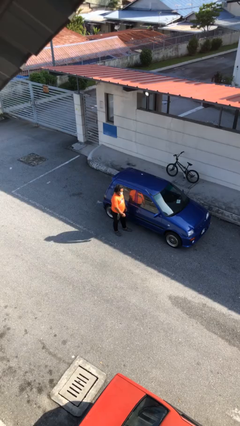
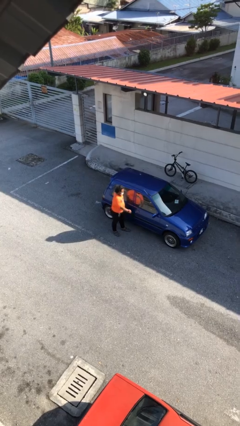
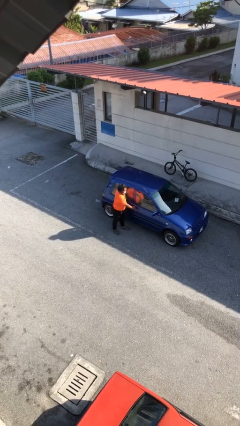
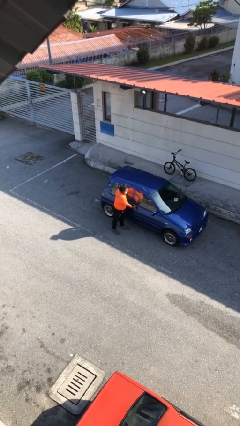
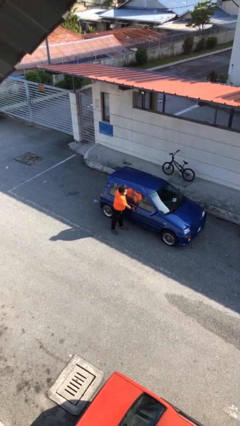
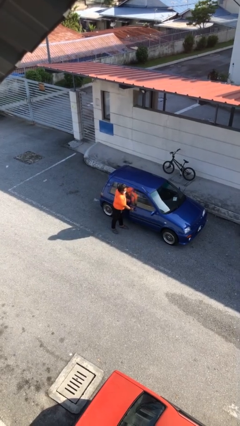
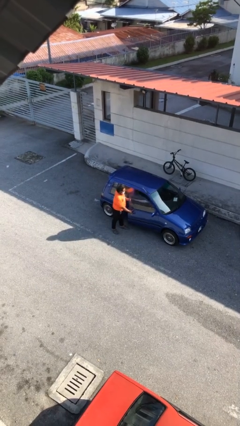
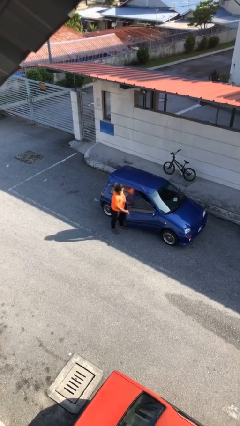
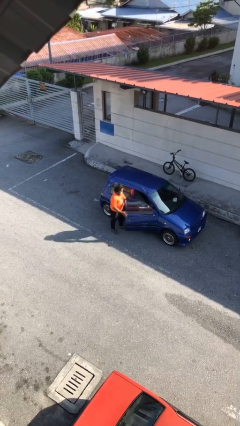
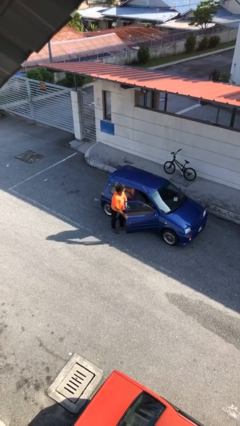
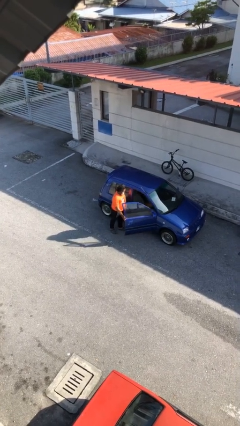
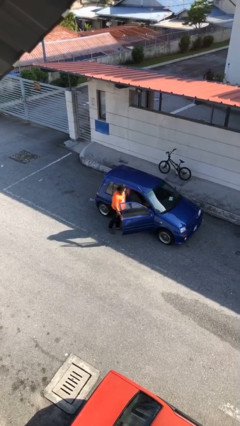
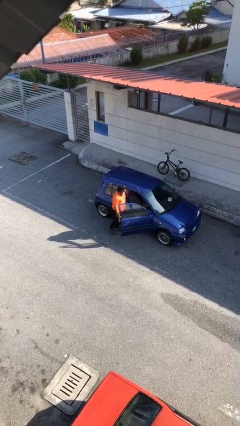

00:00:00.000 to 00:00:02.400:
person opens car door

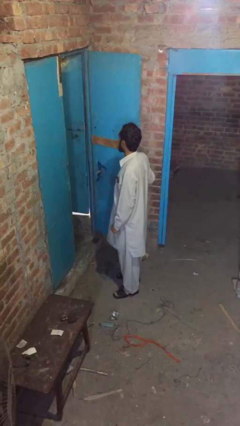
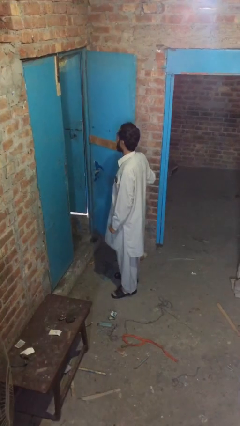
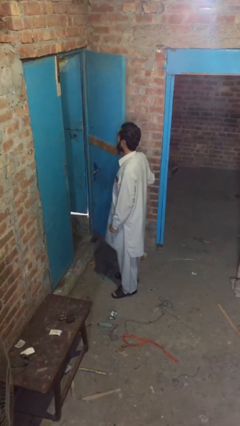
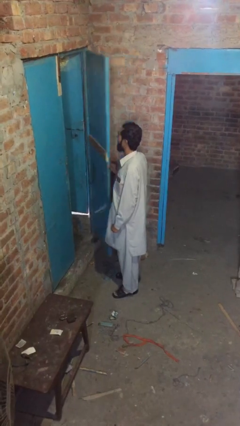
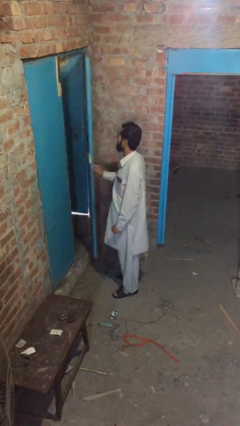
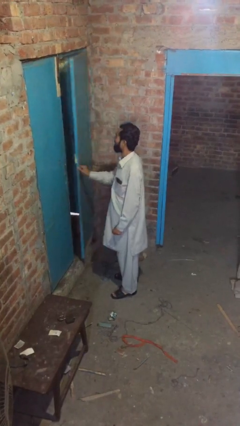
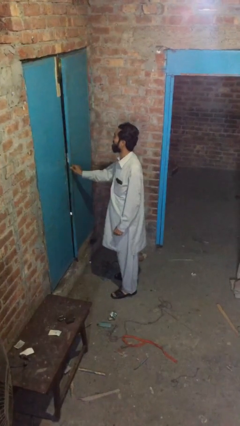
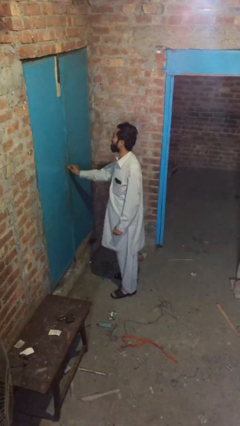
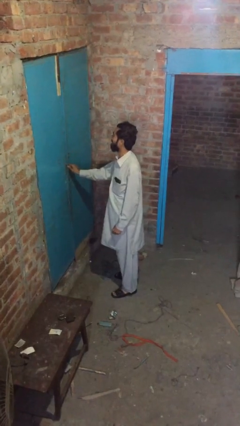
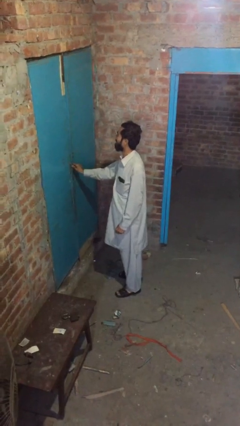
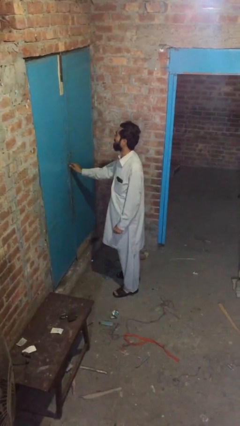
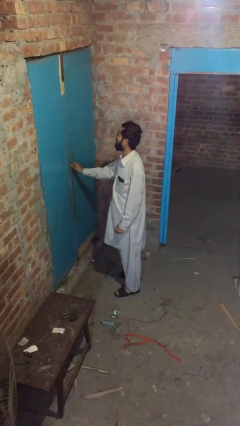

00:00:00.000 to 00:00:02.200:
person closes facility door

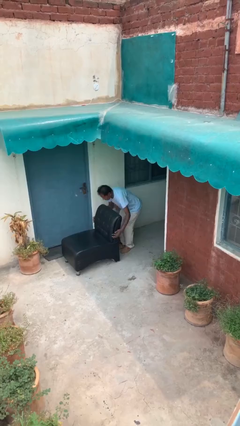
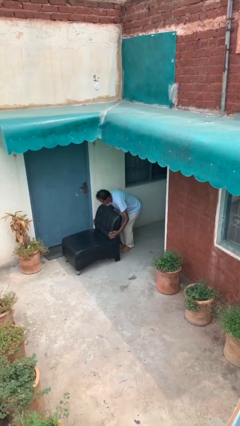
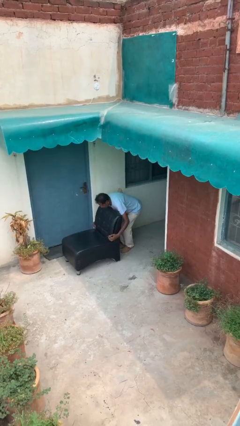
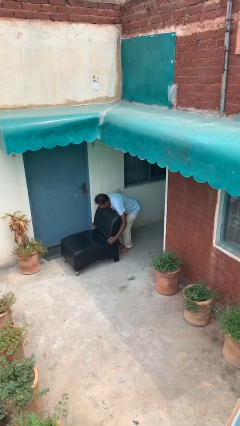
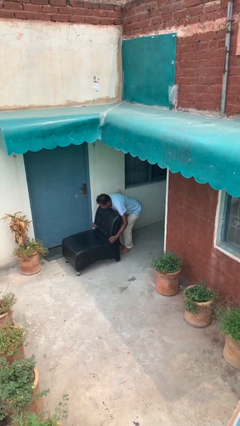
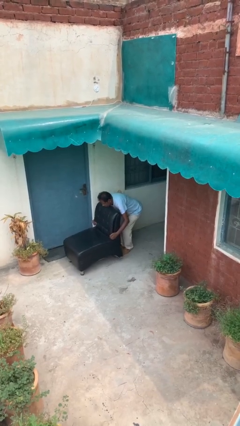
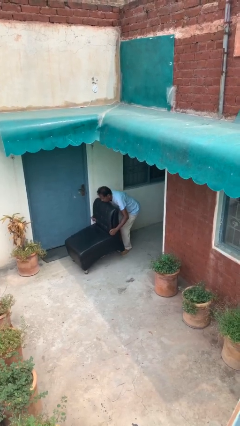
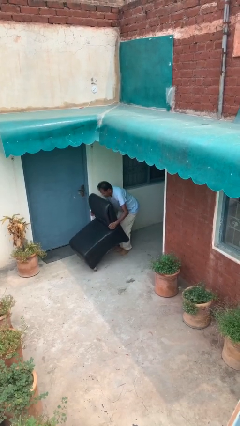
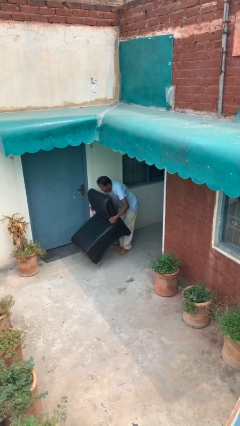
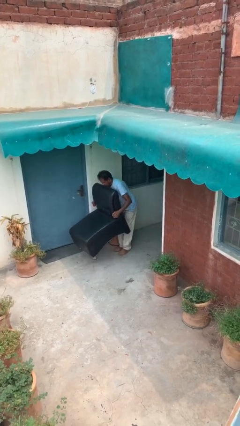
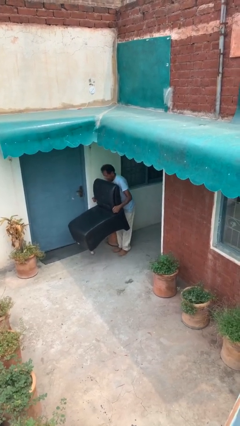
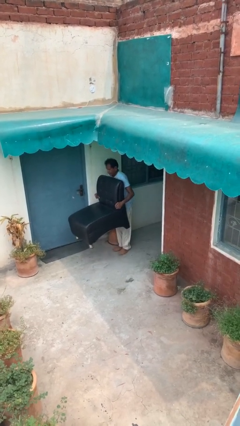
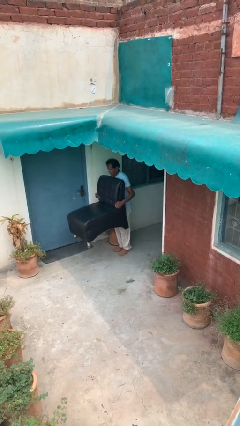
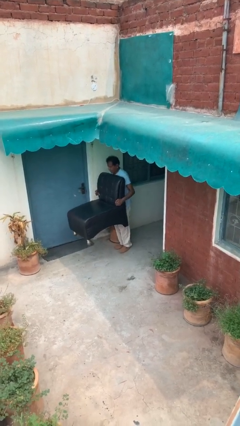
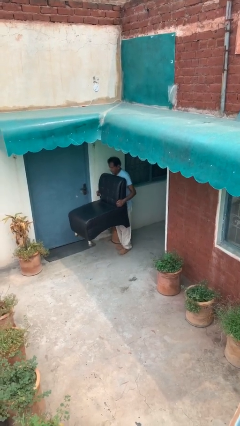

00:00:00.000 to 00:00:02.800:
person picks up object from floor

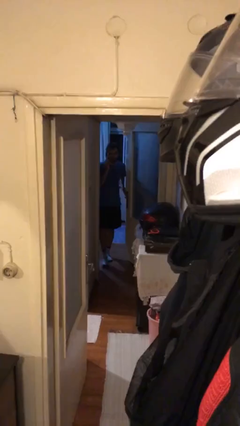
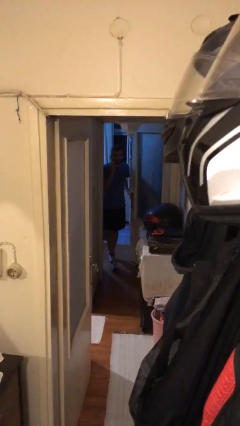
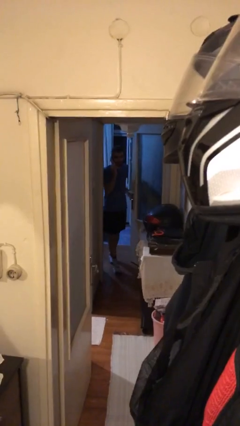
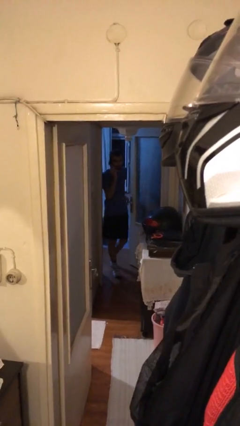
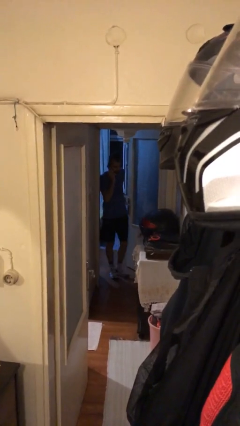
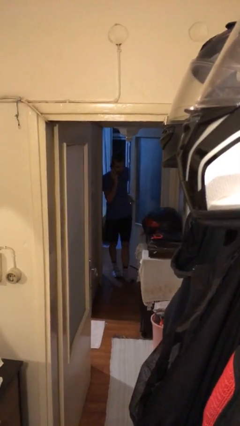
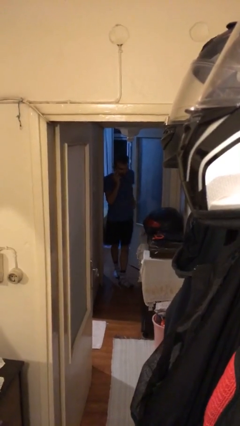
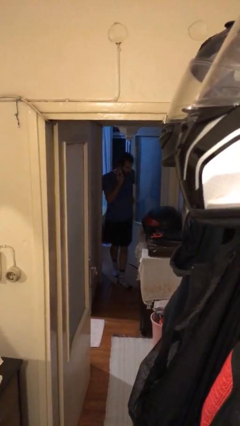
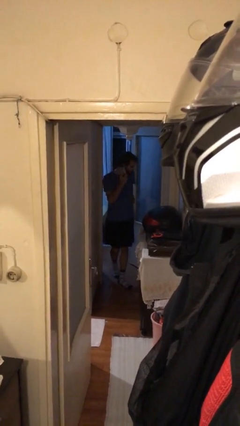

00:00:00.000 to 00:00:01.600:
person enters scene through structure

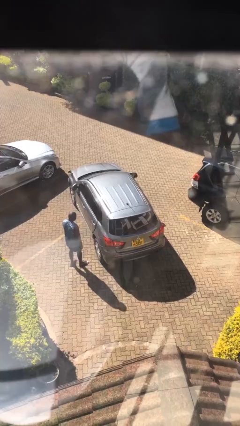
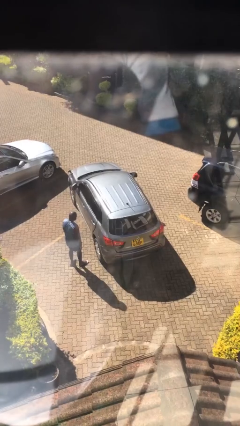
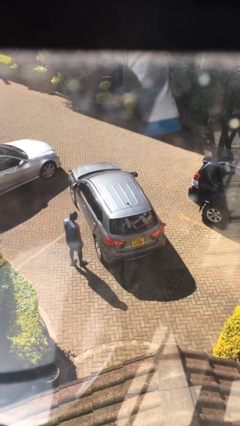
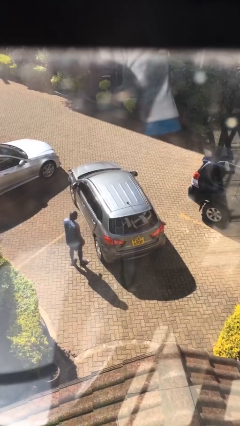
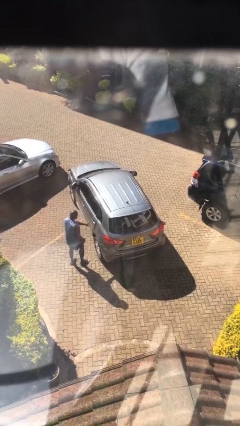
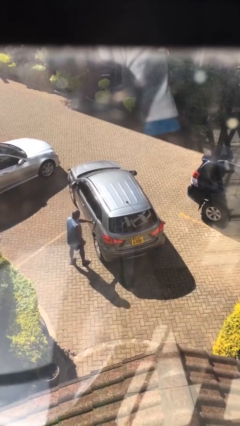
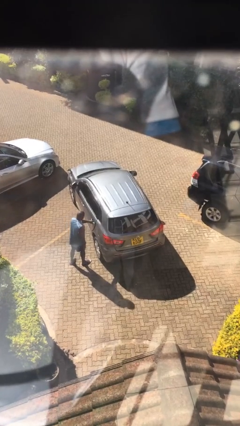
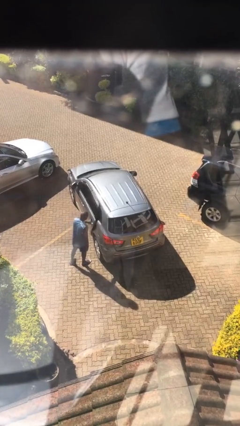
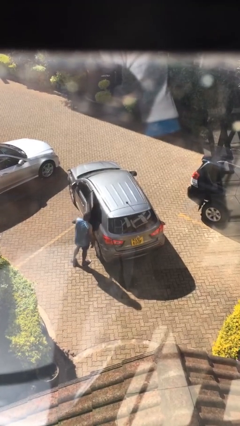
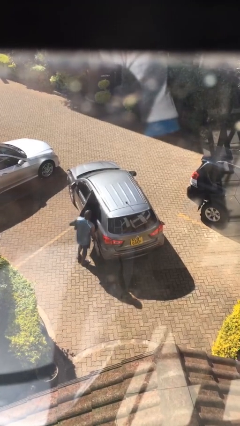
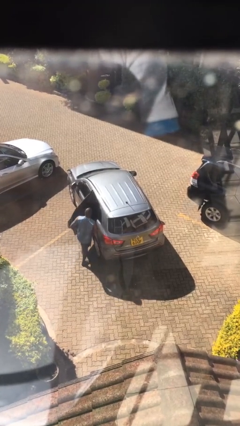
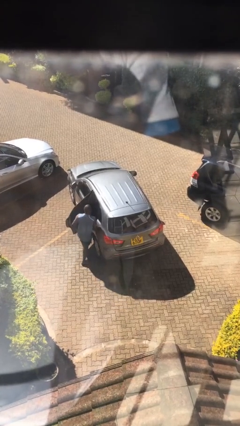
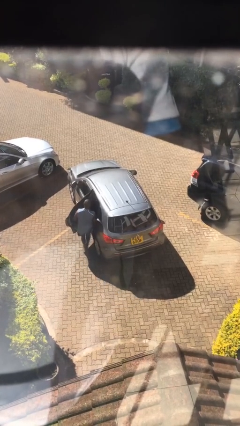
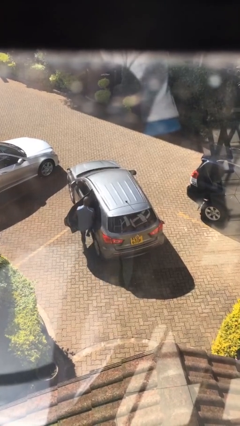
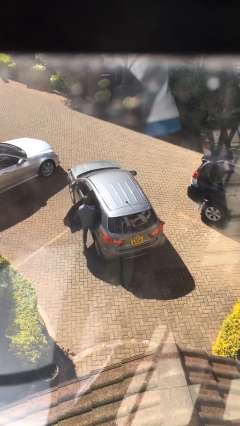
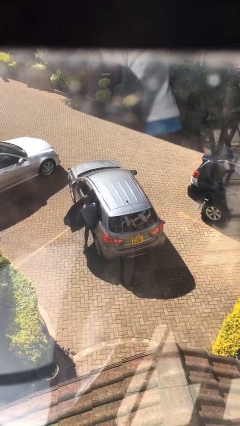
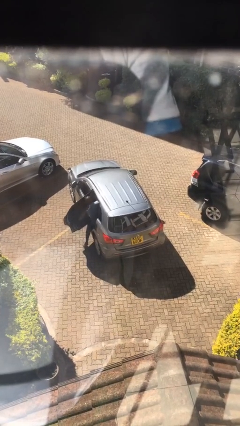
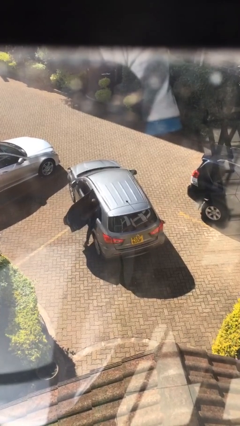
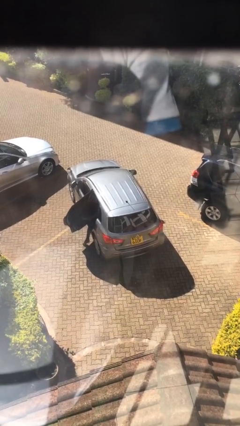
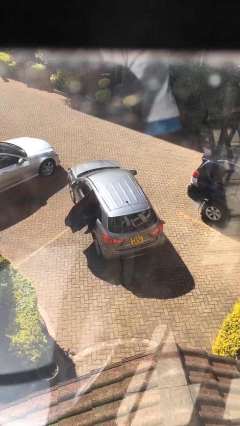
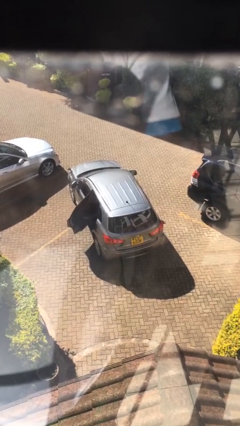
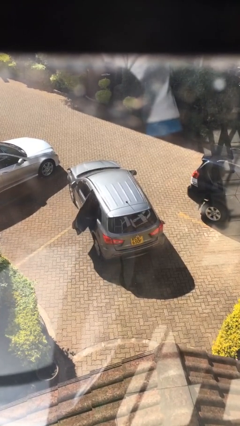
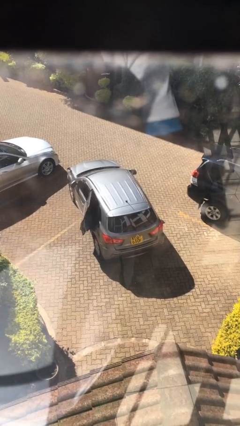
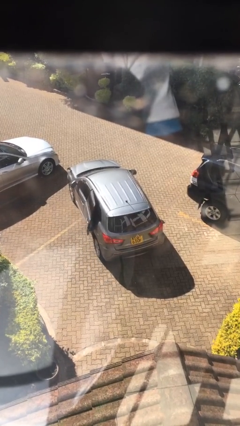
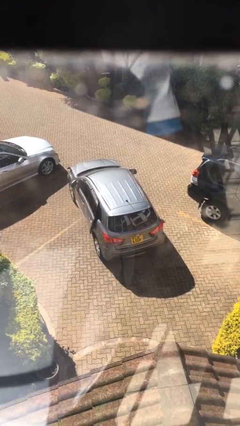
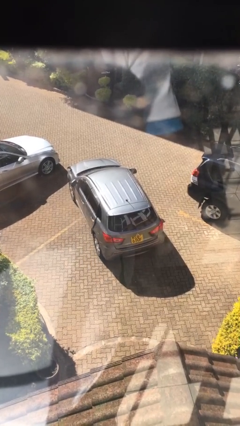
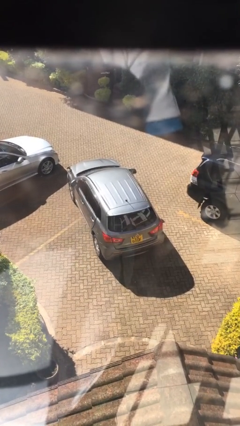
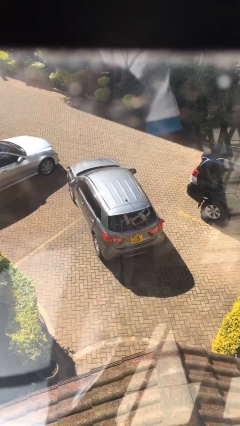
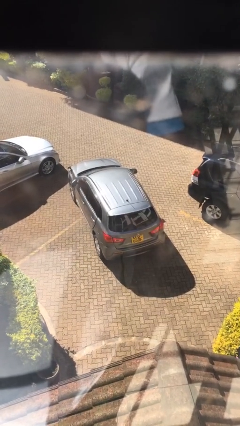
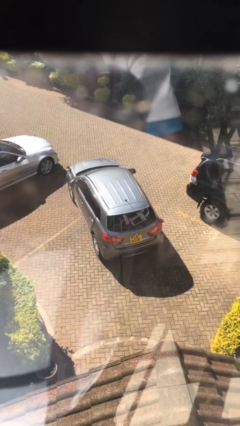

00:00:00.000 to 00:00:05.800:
car picks up person

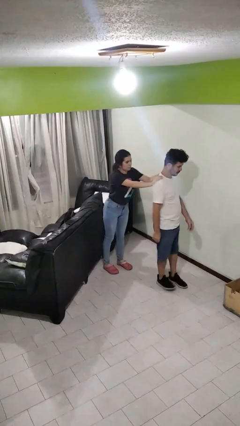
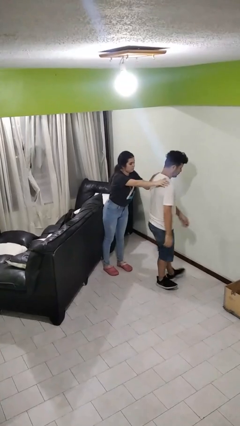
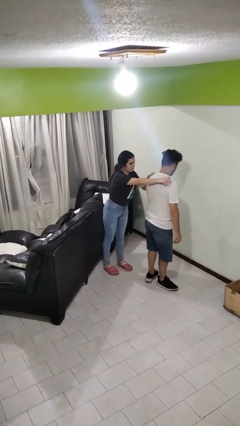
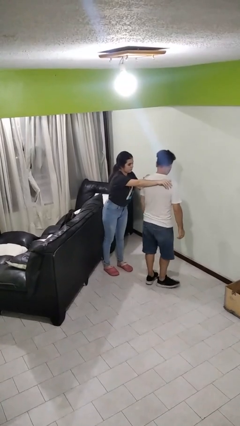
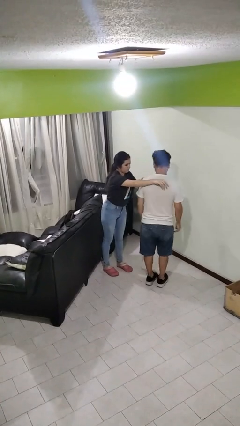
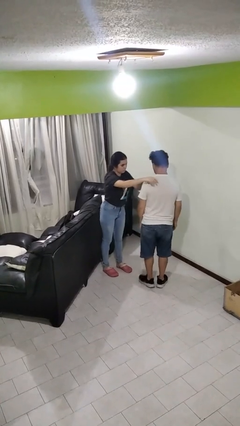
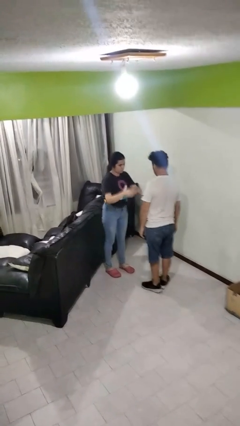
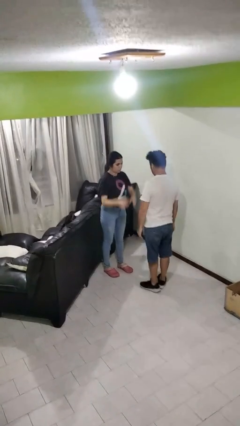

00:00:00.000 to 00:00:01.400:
person spins person around

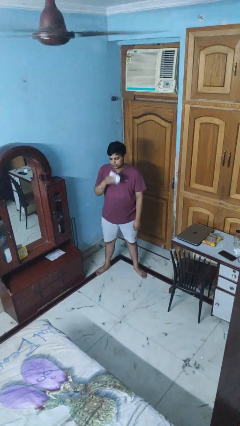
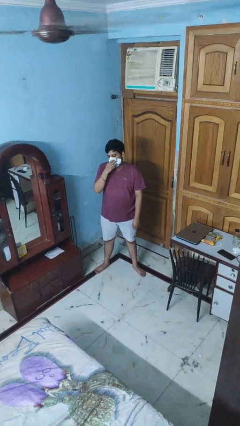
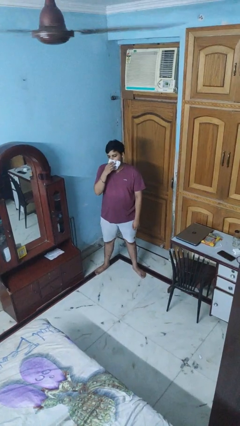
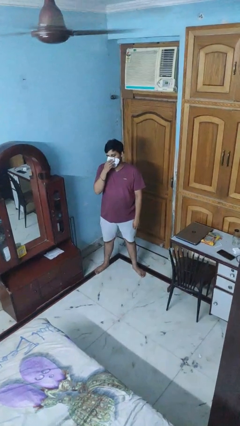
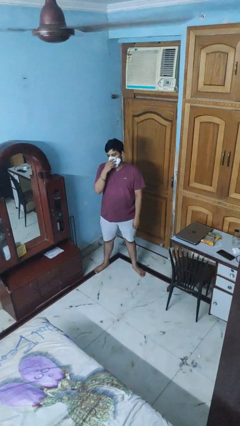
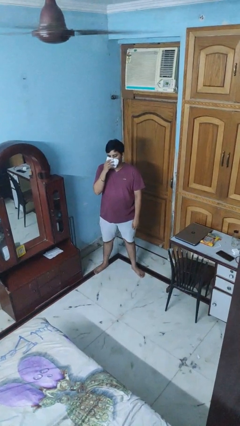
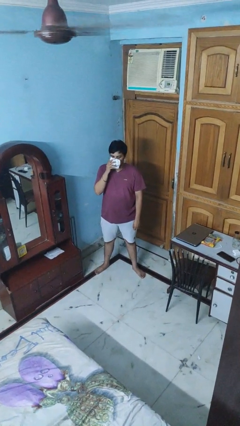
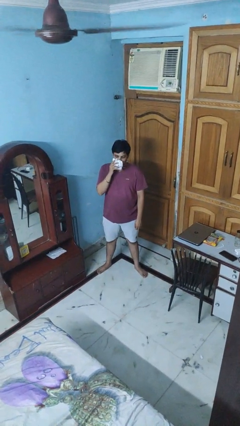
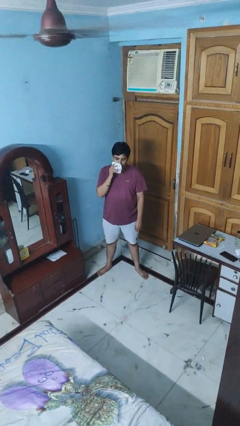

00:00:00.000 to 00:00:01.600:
person wipes mouth with napkin
